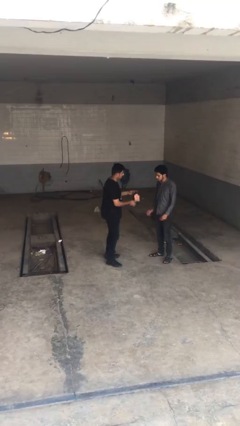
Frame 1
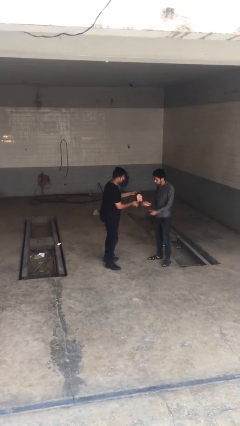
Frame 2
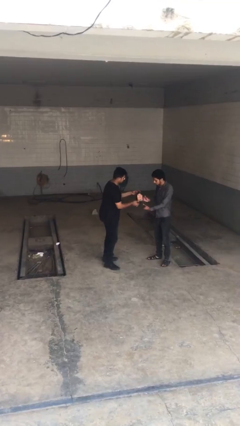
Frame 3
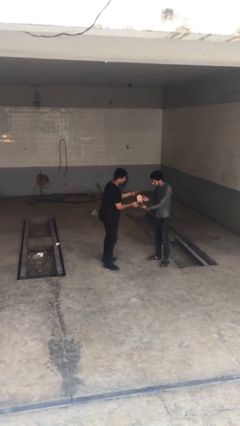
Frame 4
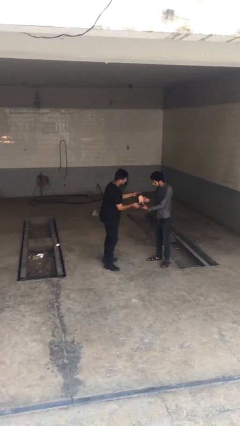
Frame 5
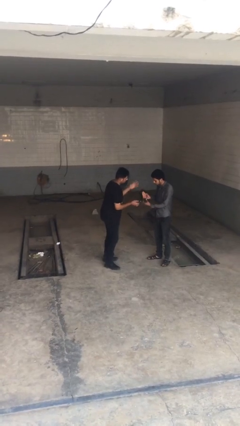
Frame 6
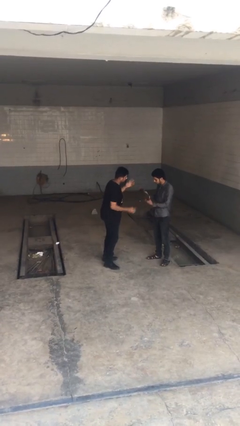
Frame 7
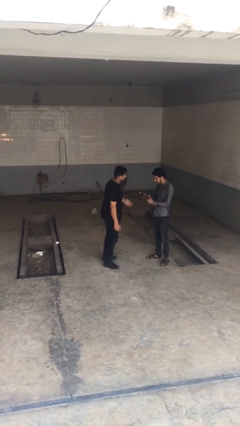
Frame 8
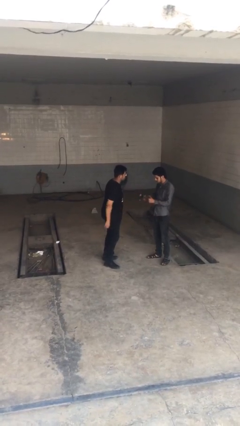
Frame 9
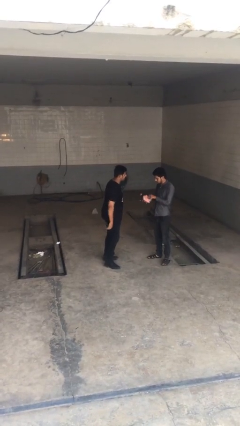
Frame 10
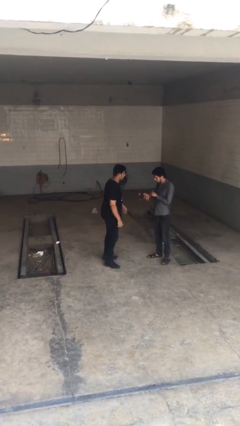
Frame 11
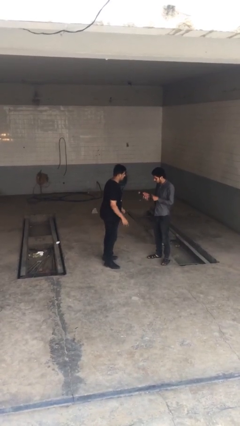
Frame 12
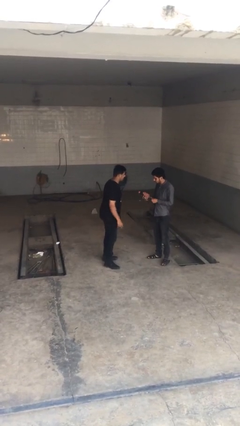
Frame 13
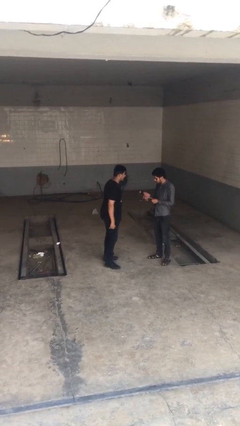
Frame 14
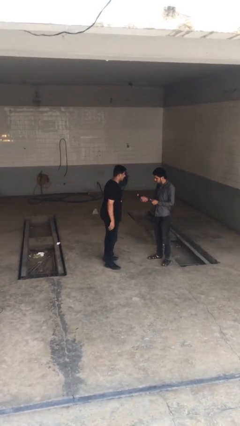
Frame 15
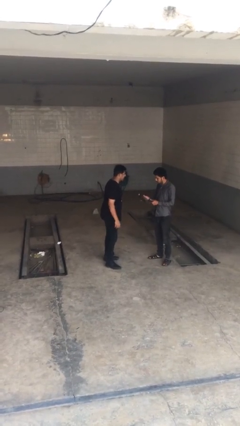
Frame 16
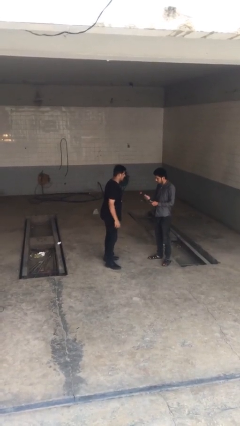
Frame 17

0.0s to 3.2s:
person transfers object to person

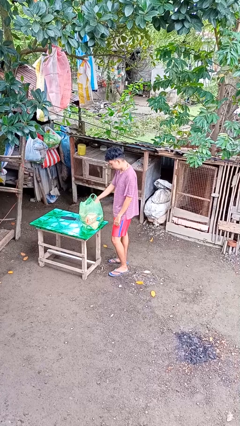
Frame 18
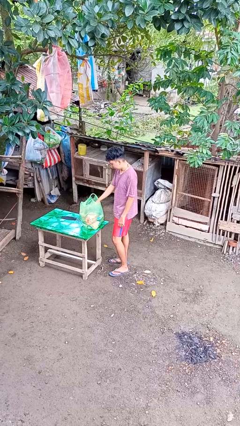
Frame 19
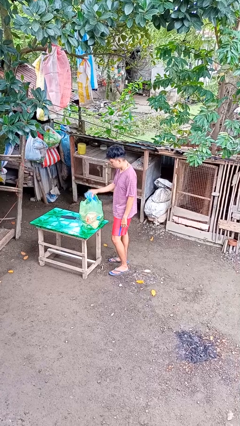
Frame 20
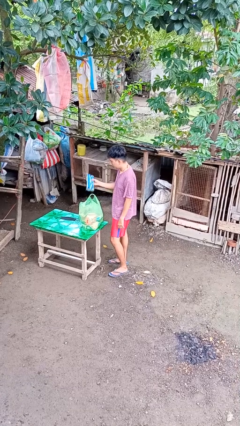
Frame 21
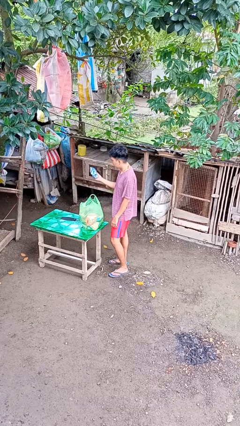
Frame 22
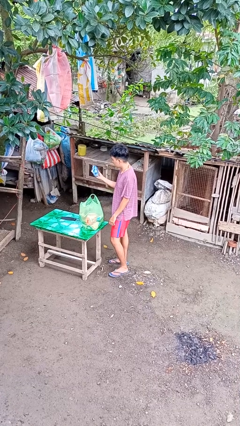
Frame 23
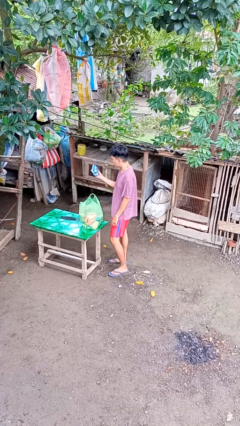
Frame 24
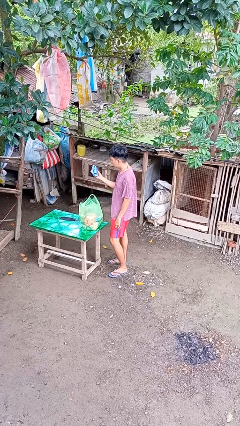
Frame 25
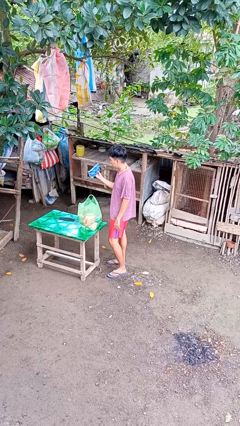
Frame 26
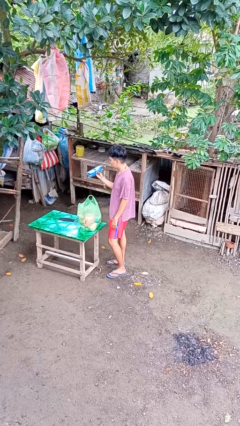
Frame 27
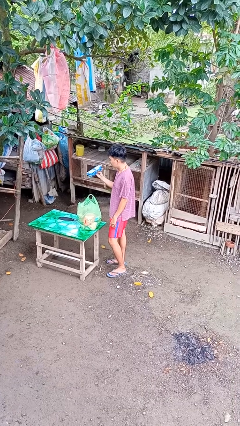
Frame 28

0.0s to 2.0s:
person takes object from bag

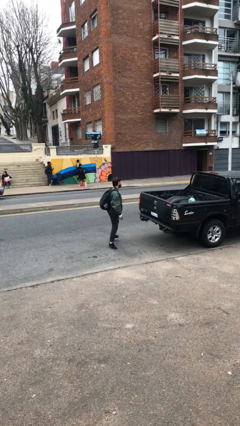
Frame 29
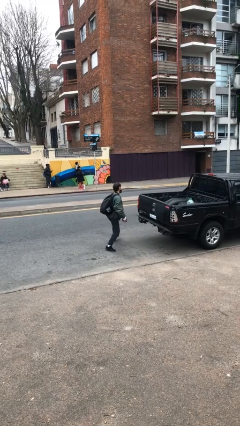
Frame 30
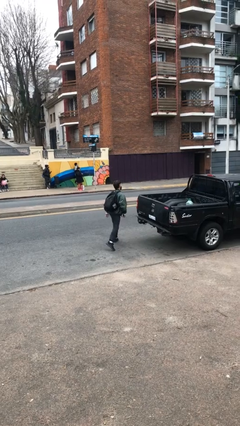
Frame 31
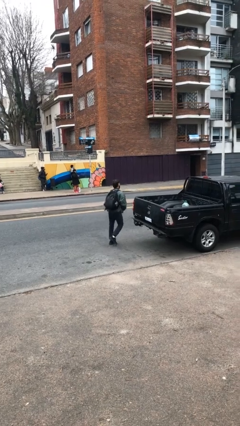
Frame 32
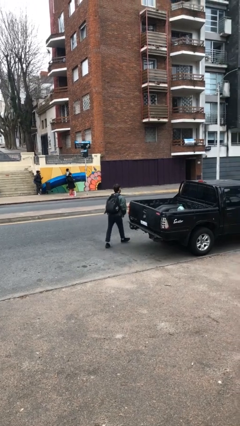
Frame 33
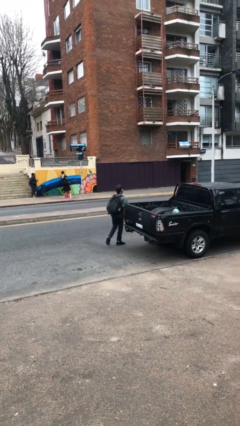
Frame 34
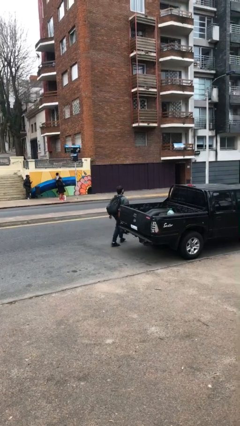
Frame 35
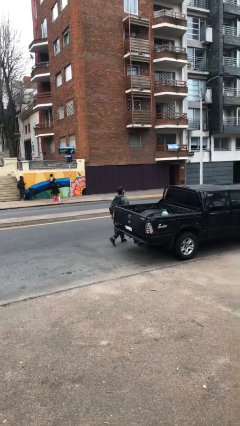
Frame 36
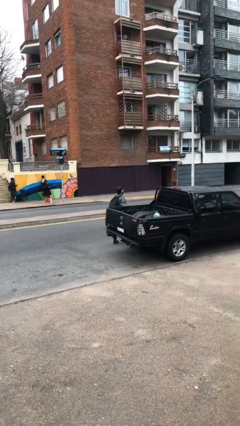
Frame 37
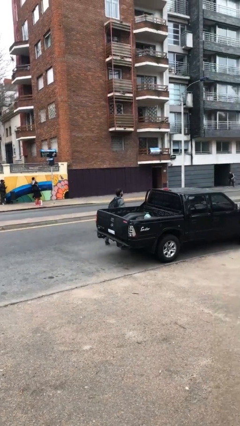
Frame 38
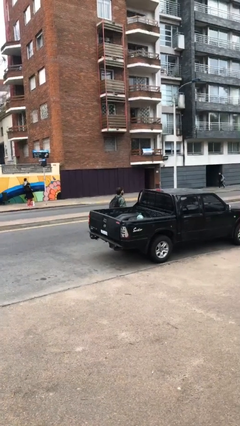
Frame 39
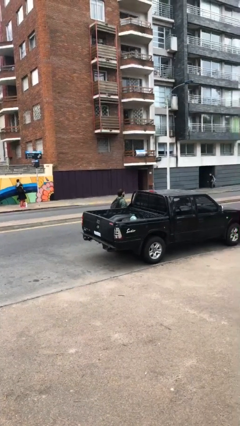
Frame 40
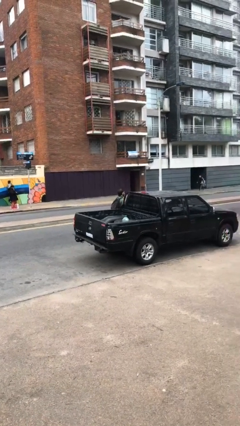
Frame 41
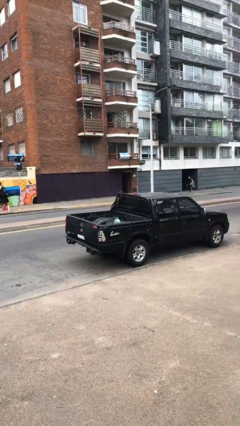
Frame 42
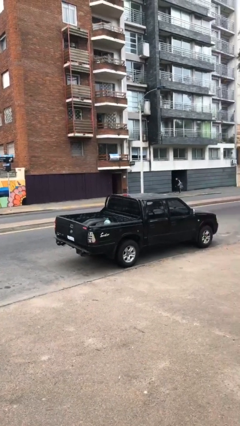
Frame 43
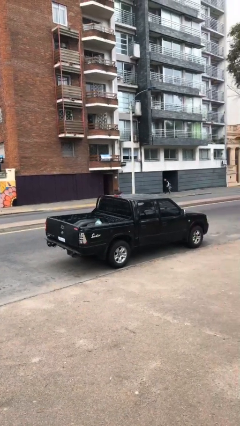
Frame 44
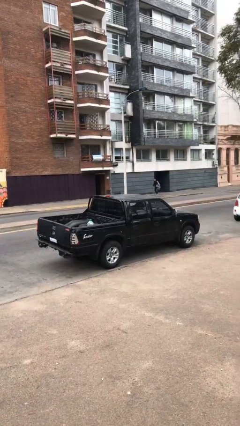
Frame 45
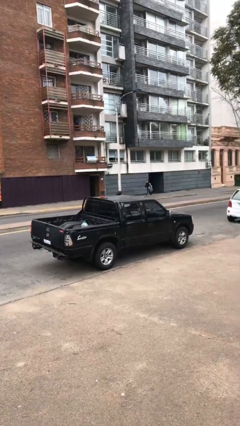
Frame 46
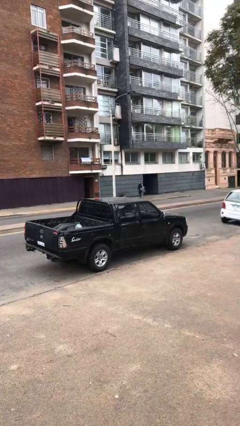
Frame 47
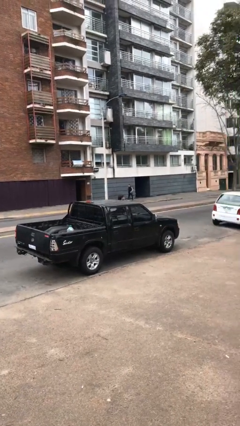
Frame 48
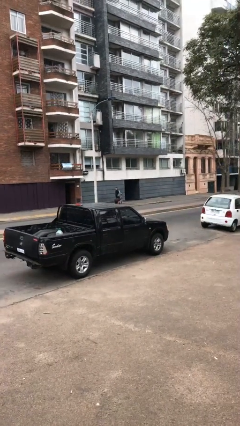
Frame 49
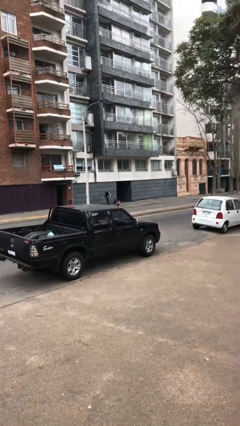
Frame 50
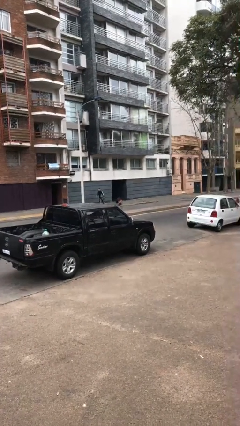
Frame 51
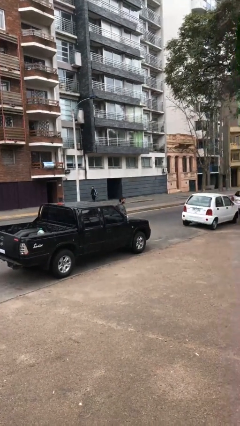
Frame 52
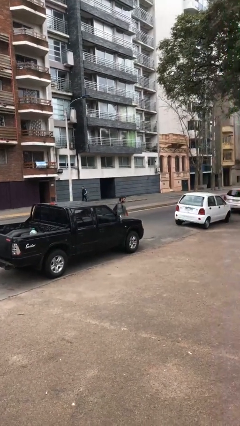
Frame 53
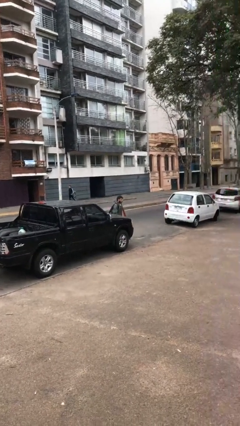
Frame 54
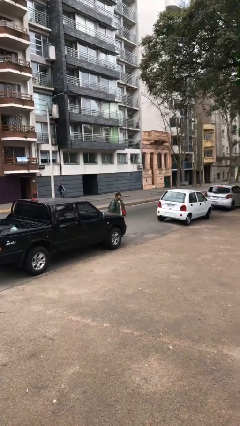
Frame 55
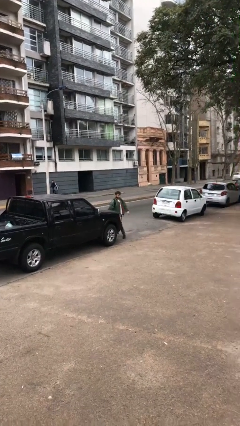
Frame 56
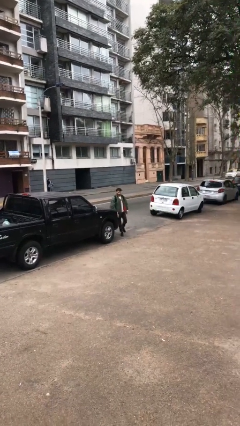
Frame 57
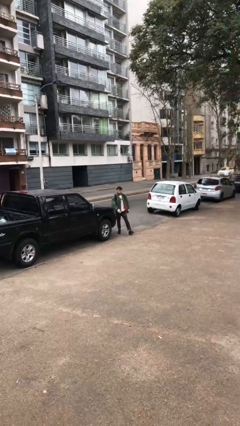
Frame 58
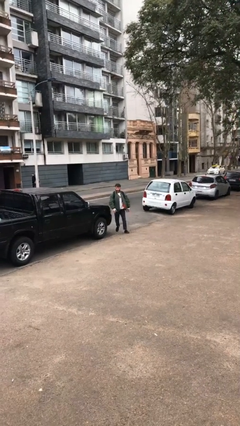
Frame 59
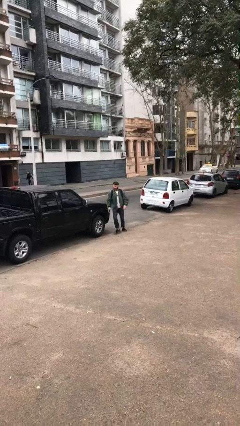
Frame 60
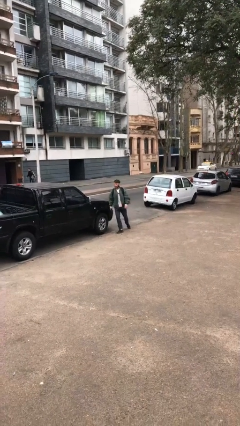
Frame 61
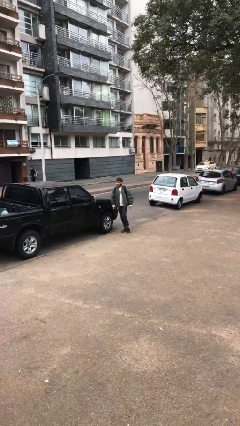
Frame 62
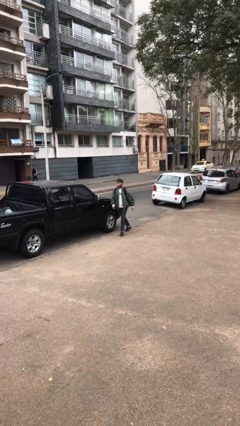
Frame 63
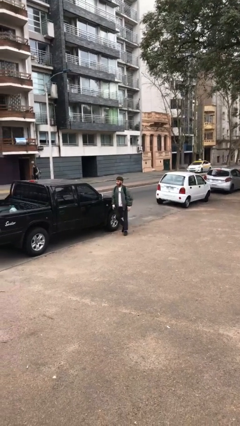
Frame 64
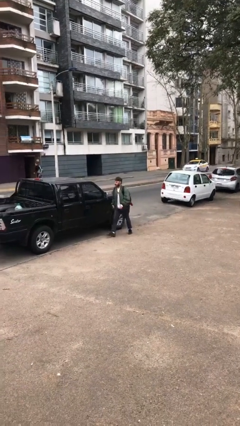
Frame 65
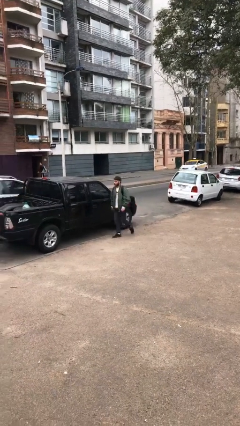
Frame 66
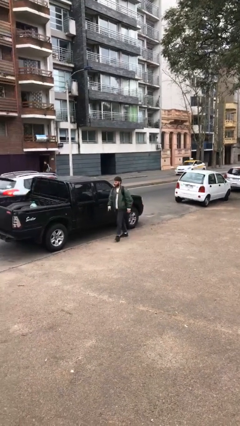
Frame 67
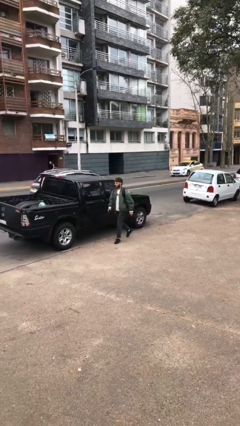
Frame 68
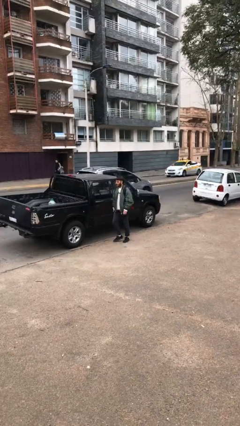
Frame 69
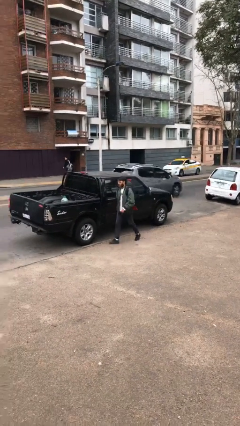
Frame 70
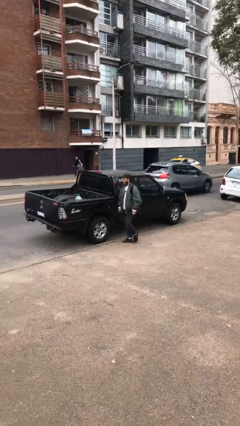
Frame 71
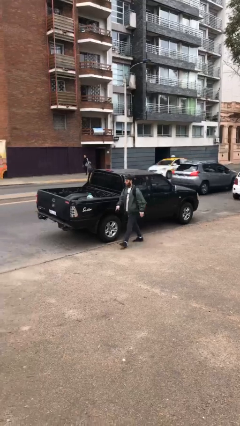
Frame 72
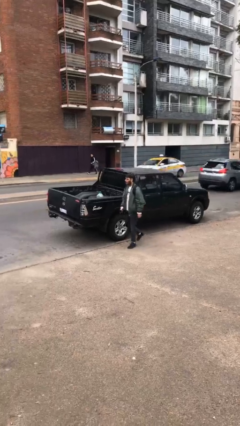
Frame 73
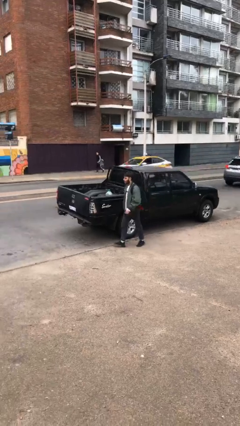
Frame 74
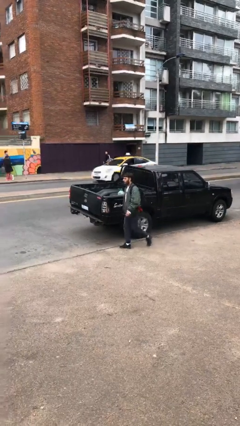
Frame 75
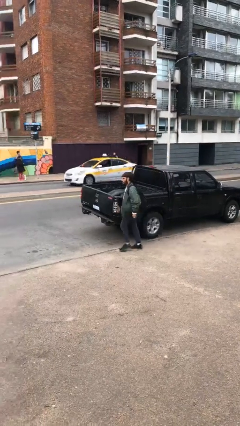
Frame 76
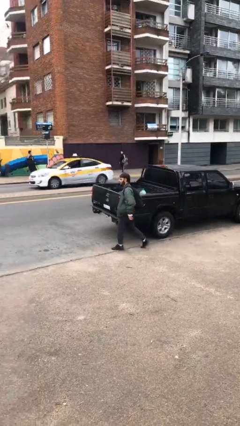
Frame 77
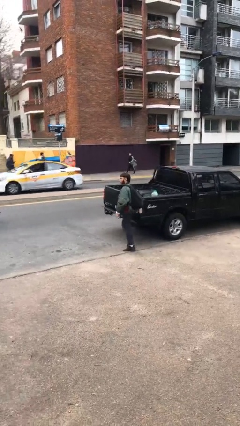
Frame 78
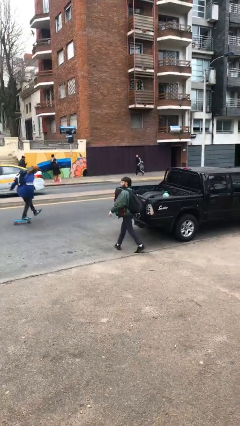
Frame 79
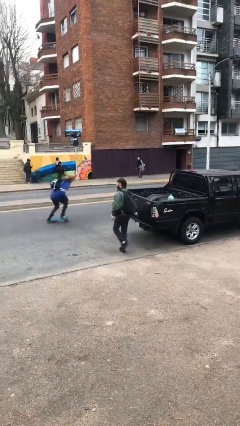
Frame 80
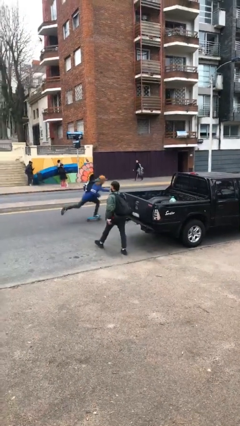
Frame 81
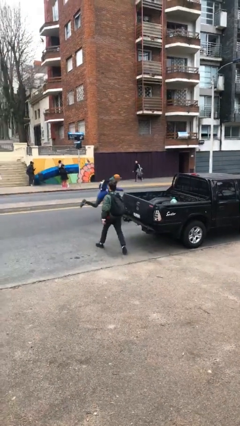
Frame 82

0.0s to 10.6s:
person walks around car

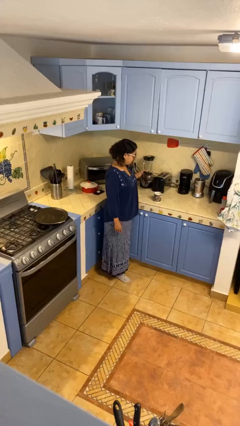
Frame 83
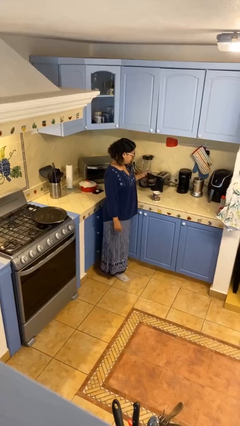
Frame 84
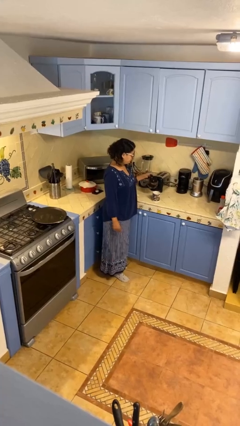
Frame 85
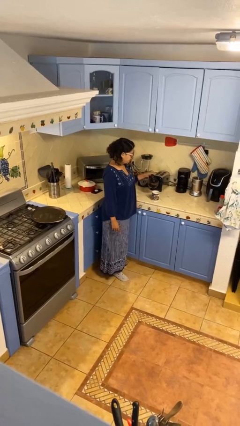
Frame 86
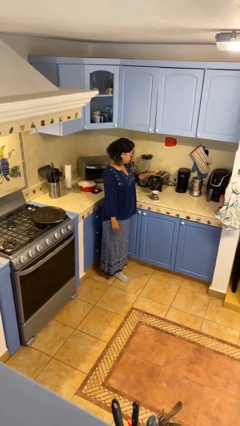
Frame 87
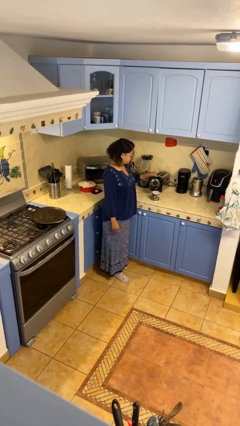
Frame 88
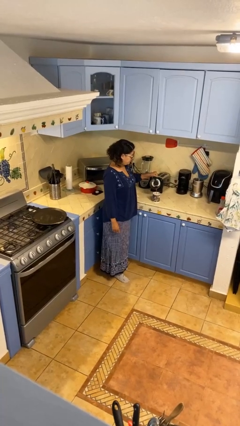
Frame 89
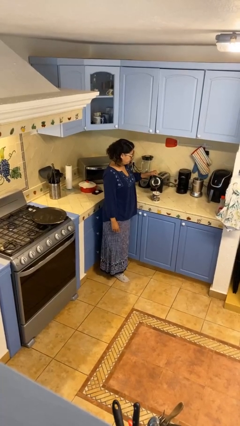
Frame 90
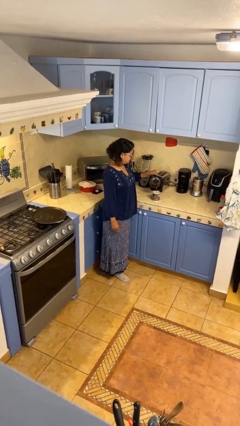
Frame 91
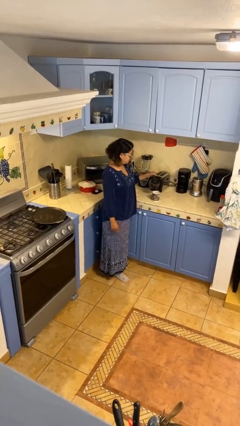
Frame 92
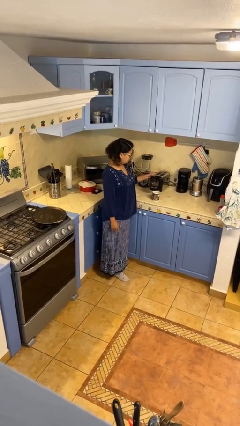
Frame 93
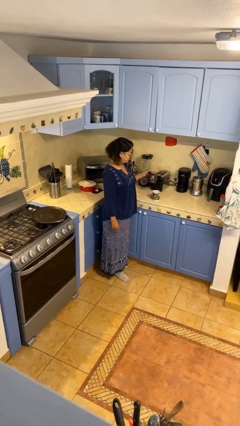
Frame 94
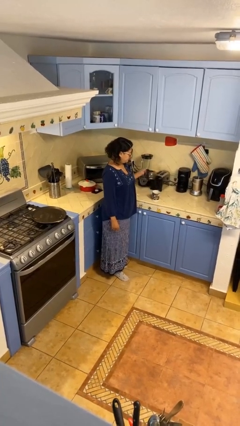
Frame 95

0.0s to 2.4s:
person pours coffee into mug
